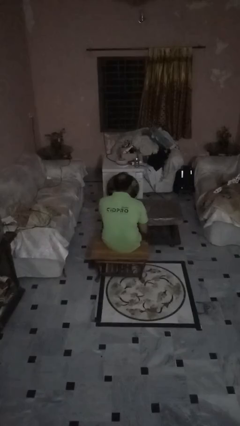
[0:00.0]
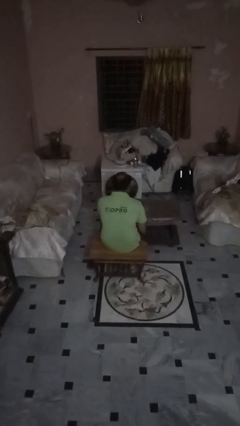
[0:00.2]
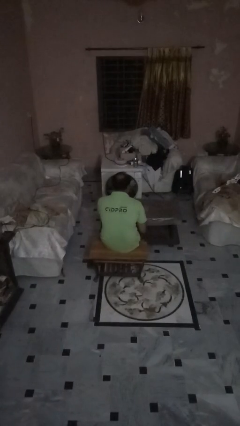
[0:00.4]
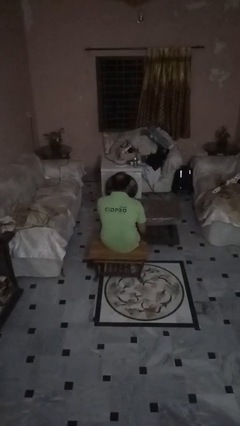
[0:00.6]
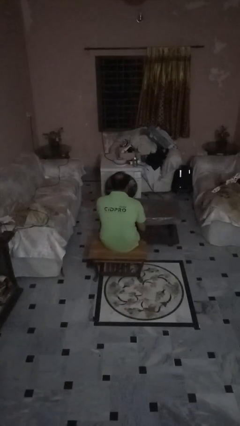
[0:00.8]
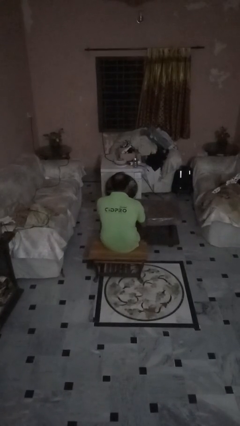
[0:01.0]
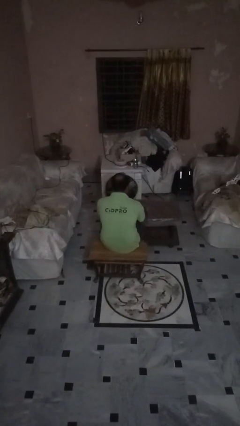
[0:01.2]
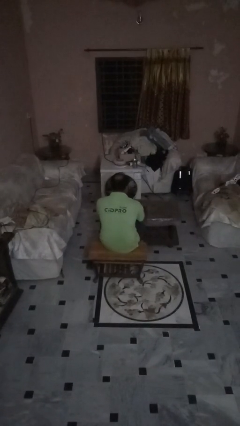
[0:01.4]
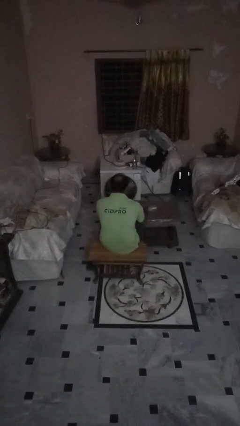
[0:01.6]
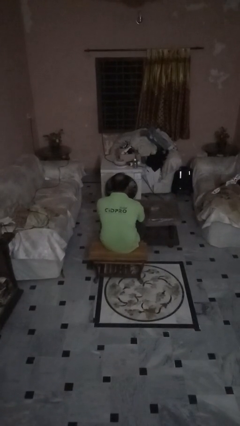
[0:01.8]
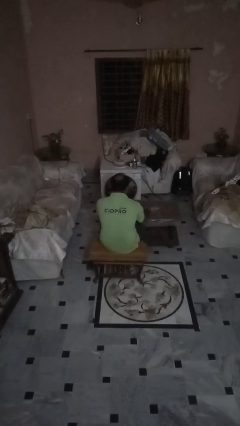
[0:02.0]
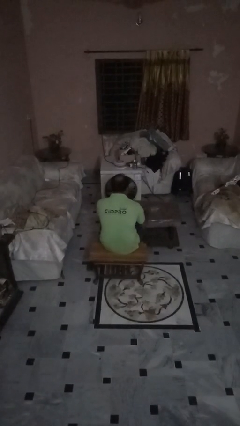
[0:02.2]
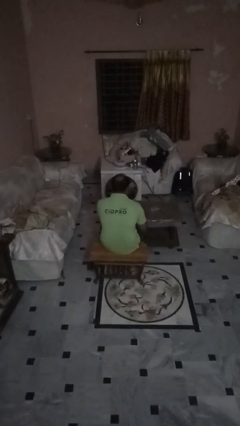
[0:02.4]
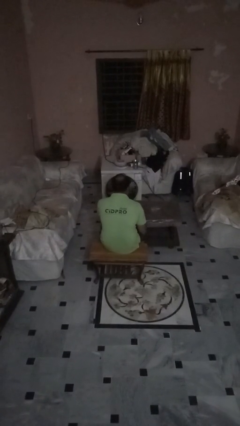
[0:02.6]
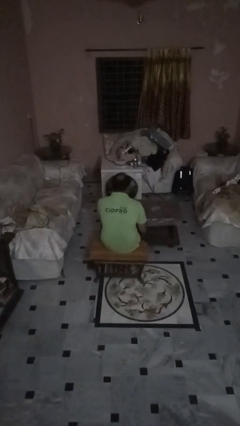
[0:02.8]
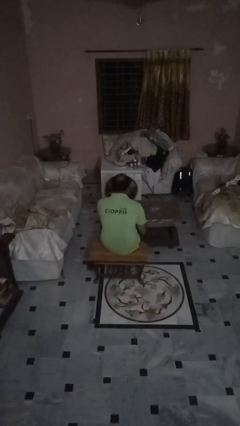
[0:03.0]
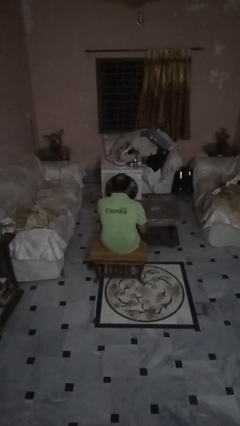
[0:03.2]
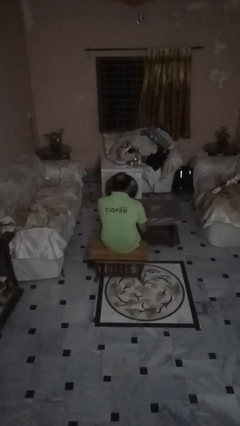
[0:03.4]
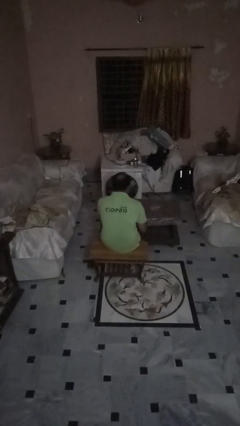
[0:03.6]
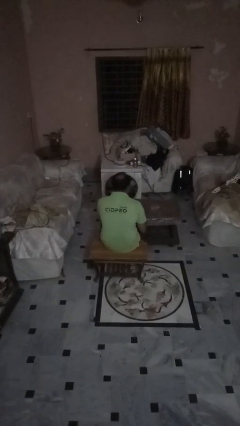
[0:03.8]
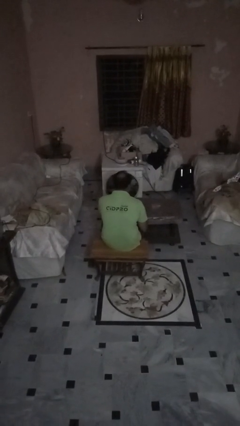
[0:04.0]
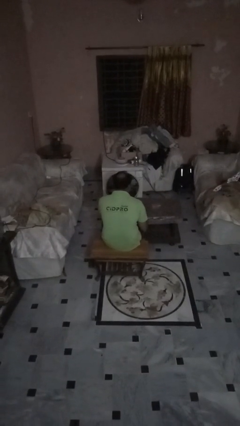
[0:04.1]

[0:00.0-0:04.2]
person knocks over glass

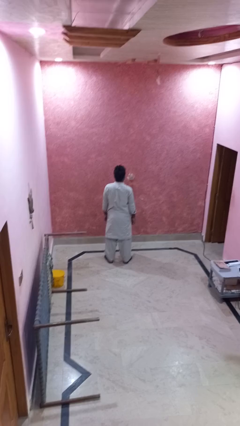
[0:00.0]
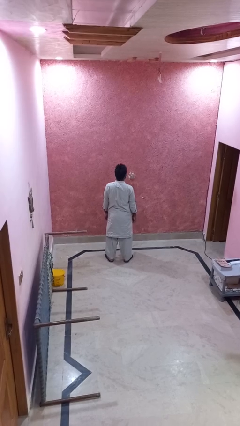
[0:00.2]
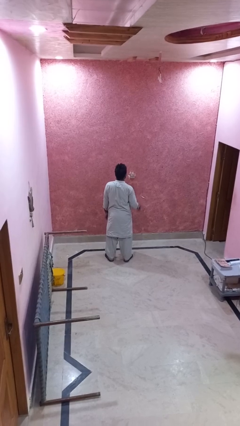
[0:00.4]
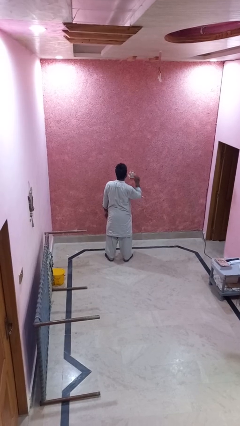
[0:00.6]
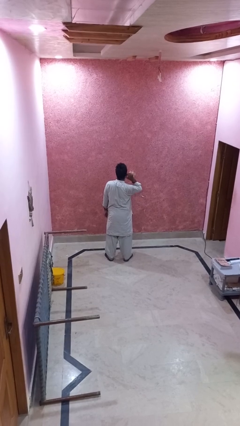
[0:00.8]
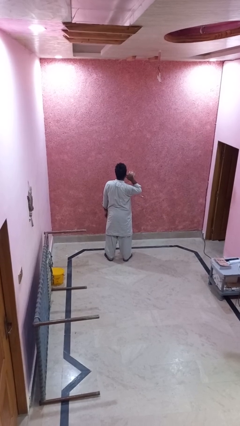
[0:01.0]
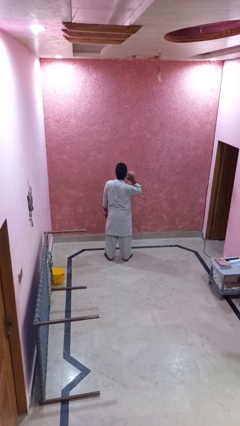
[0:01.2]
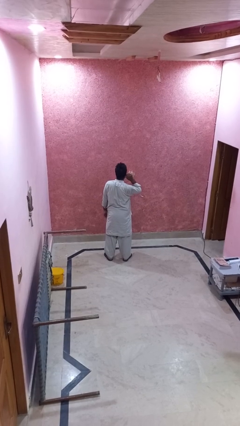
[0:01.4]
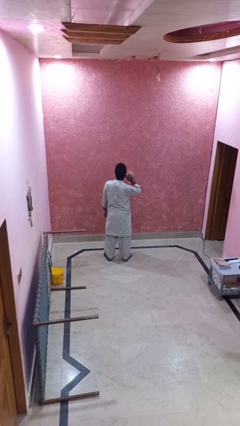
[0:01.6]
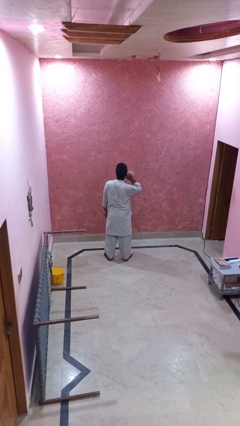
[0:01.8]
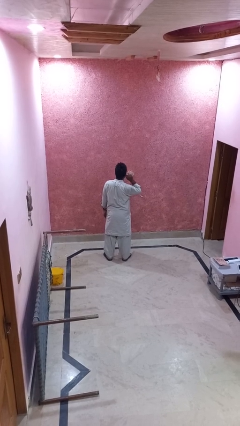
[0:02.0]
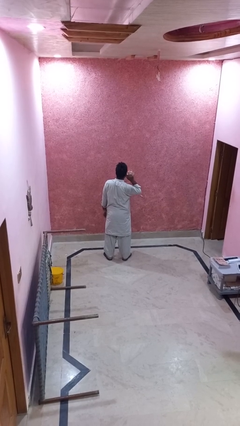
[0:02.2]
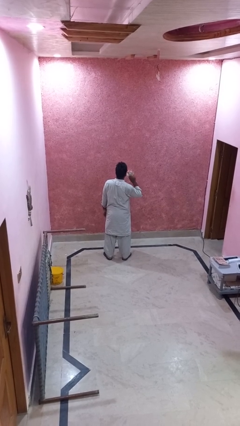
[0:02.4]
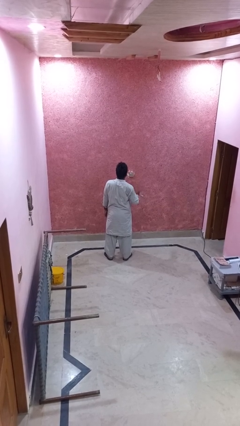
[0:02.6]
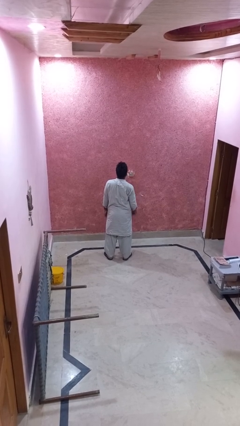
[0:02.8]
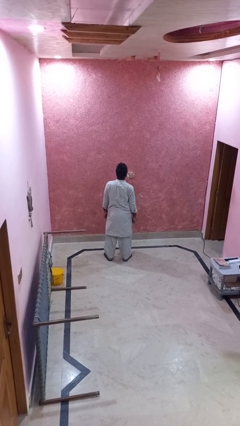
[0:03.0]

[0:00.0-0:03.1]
person touches earlobe

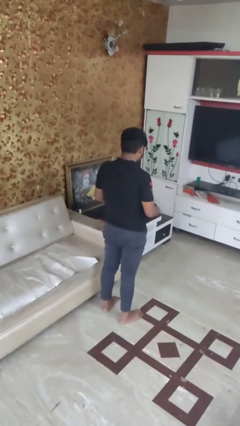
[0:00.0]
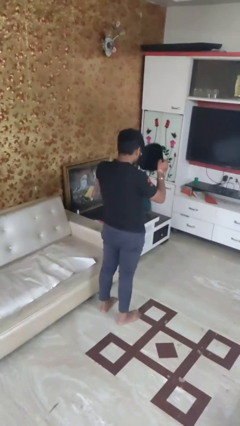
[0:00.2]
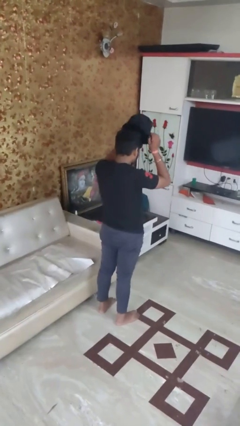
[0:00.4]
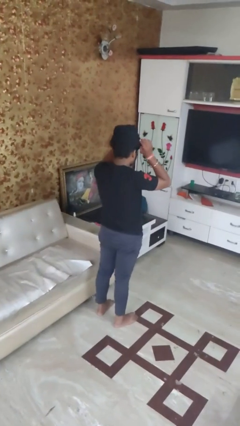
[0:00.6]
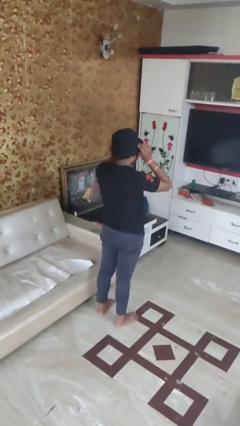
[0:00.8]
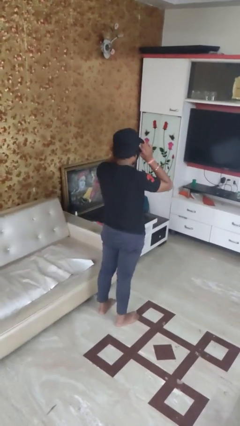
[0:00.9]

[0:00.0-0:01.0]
person puts on hat

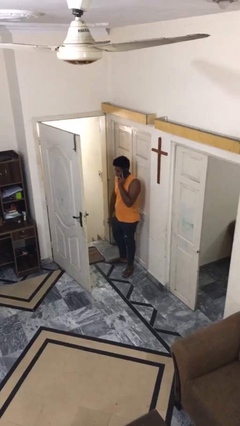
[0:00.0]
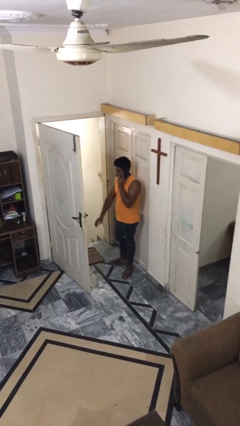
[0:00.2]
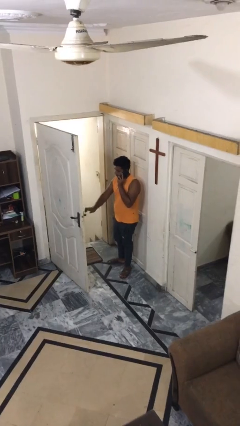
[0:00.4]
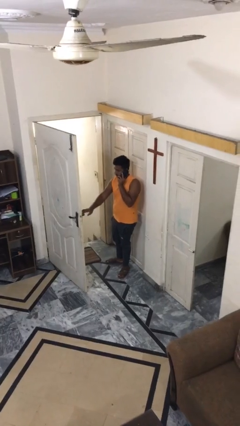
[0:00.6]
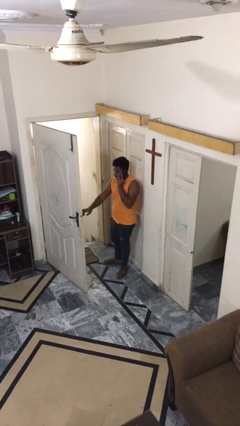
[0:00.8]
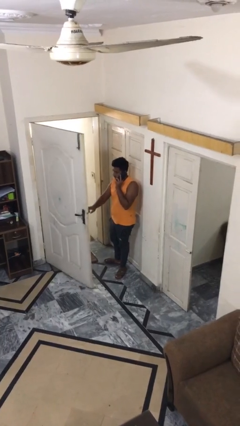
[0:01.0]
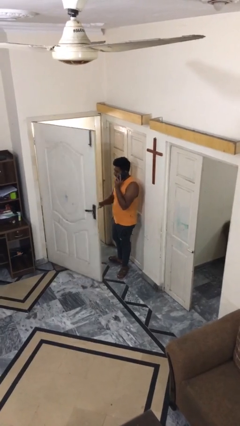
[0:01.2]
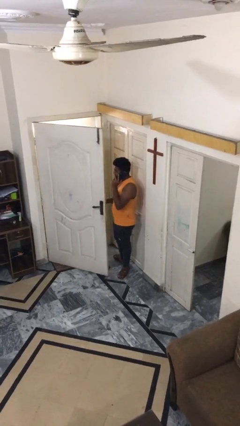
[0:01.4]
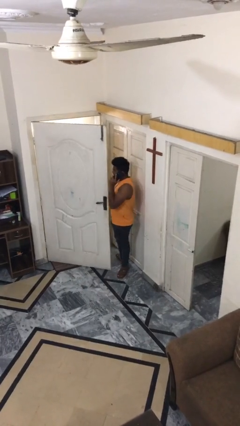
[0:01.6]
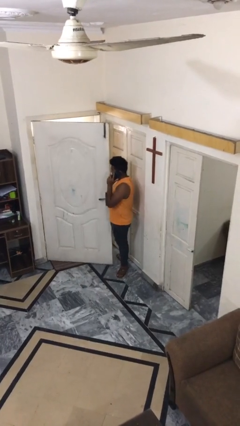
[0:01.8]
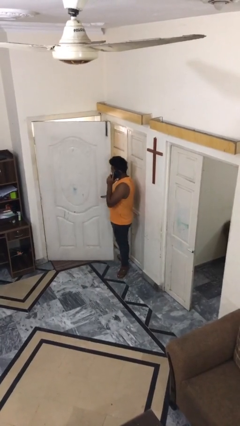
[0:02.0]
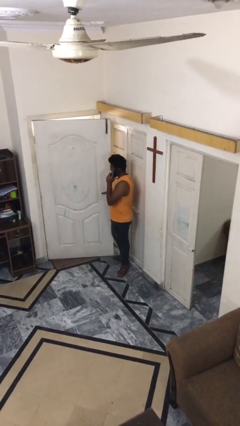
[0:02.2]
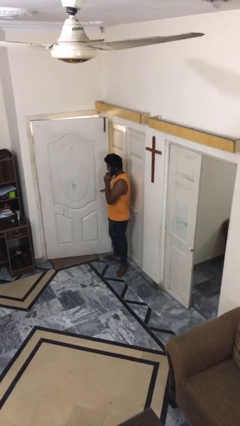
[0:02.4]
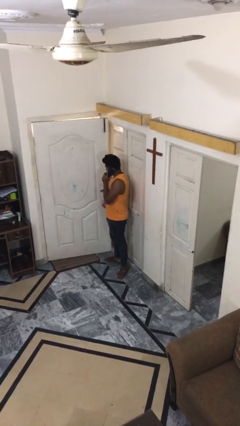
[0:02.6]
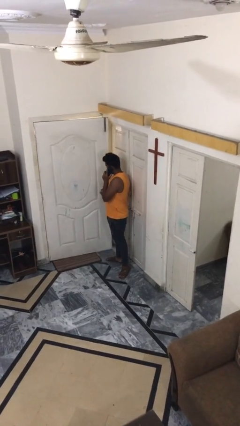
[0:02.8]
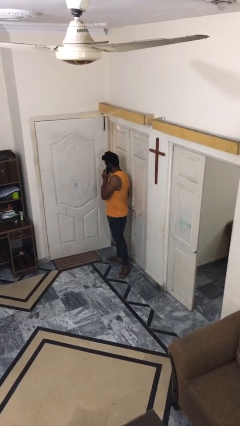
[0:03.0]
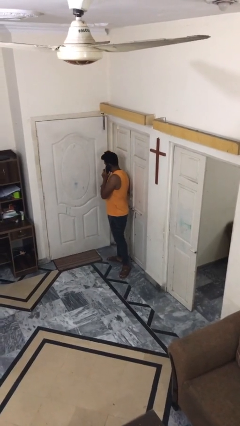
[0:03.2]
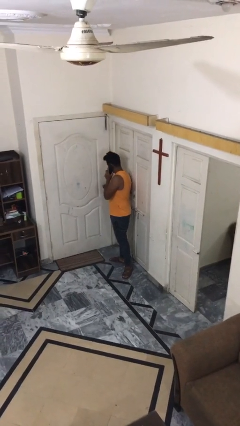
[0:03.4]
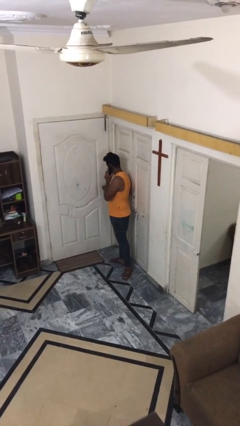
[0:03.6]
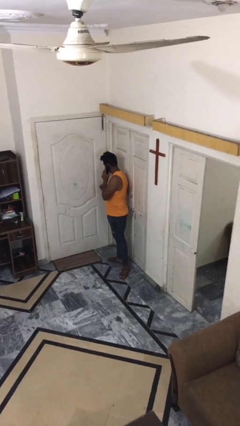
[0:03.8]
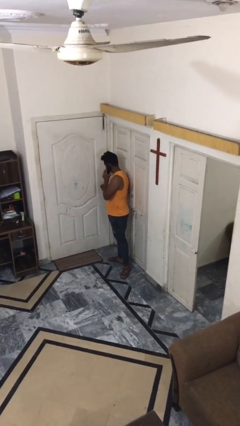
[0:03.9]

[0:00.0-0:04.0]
person closes facility door

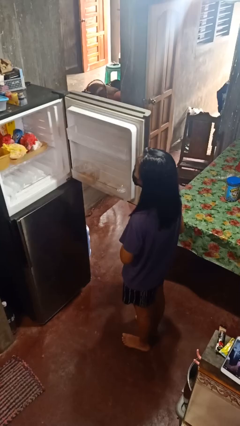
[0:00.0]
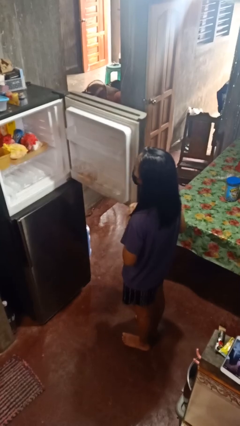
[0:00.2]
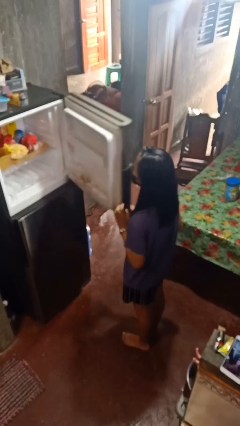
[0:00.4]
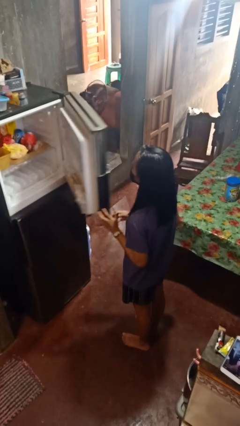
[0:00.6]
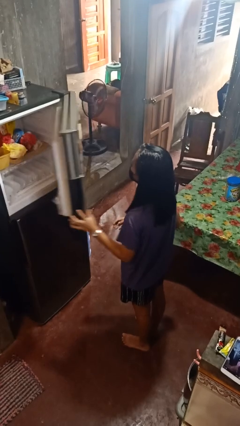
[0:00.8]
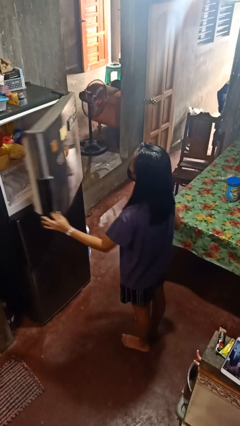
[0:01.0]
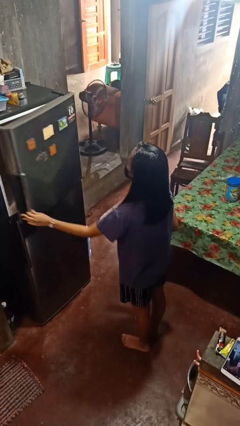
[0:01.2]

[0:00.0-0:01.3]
person closes refrigerator

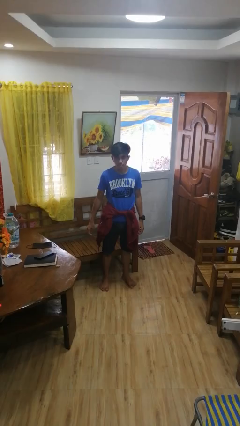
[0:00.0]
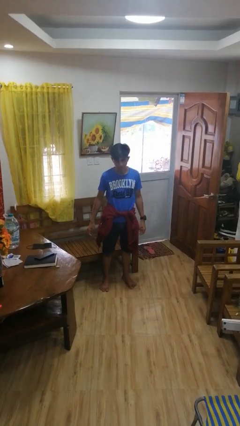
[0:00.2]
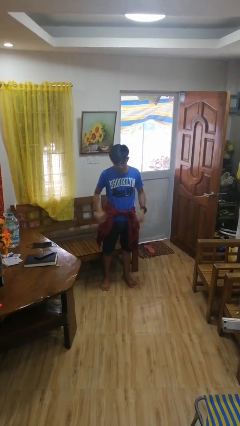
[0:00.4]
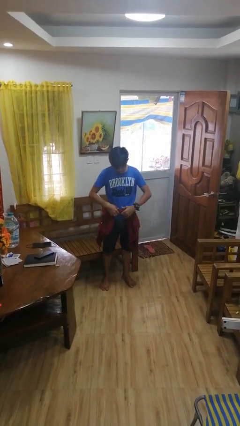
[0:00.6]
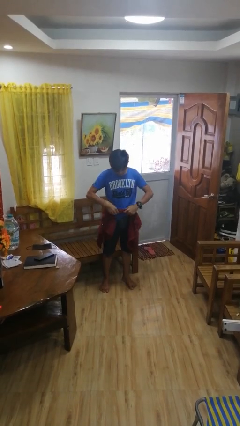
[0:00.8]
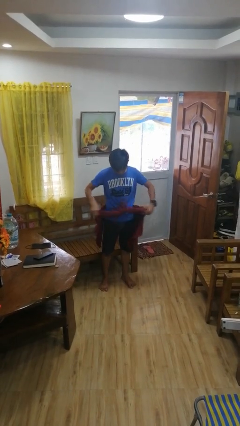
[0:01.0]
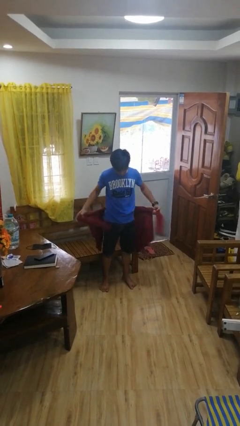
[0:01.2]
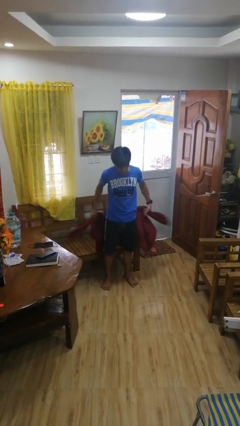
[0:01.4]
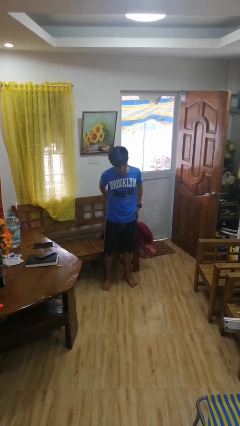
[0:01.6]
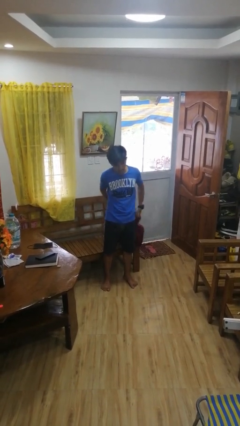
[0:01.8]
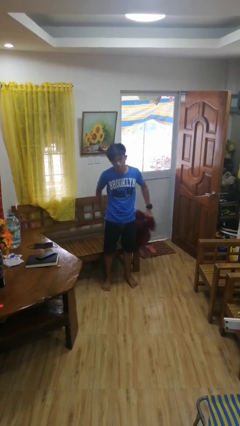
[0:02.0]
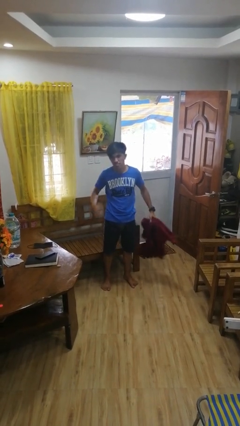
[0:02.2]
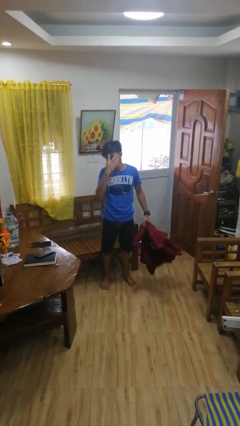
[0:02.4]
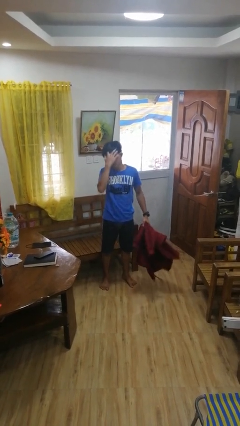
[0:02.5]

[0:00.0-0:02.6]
person unties jacket around waist

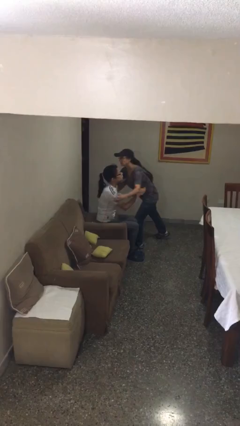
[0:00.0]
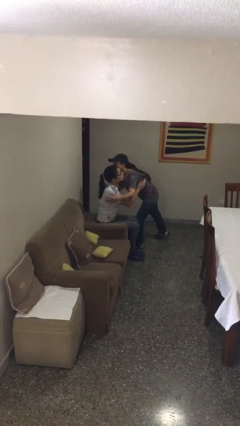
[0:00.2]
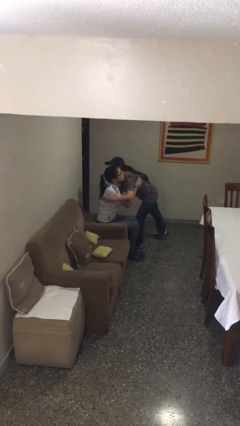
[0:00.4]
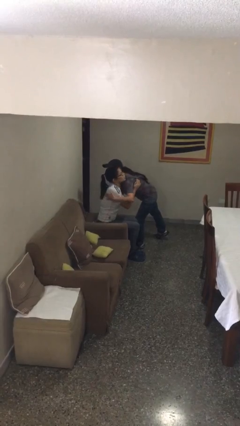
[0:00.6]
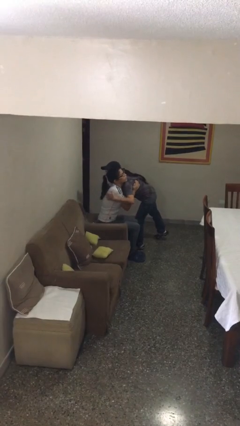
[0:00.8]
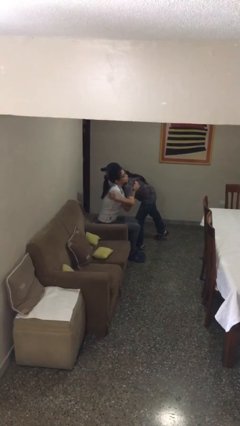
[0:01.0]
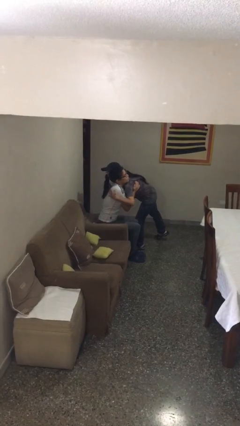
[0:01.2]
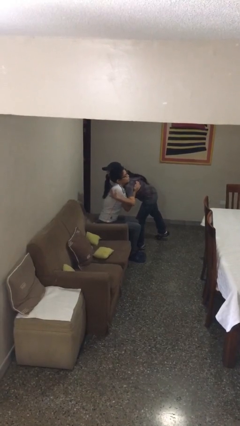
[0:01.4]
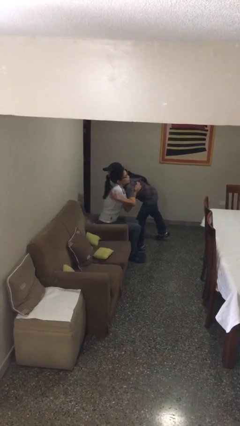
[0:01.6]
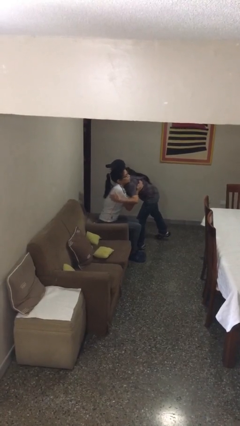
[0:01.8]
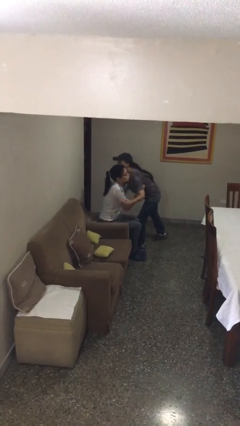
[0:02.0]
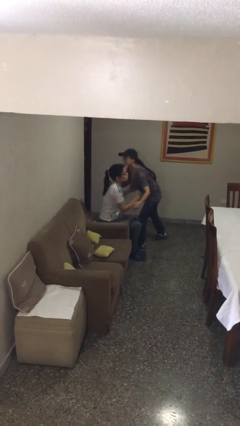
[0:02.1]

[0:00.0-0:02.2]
person embraces person
